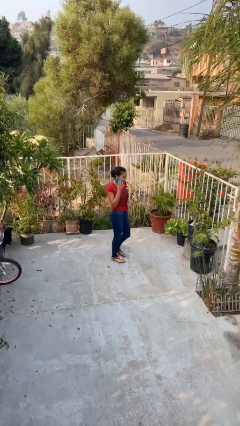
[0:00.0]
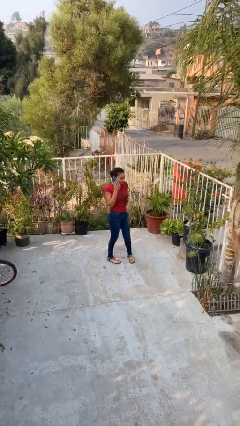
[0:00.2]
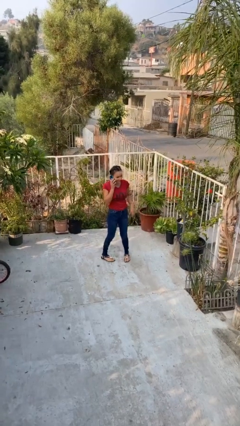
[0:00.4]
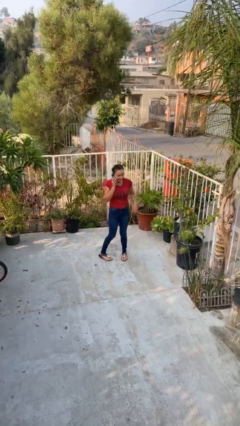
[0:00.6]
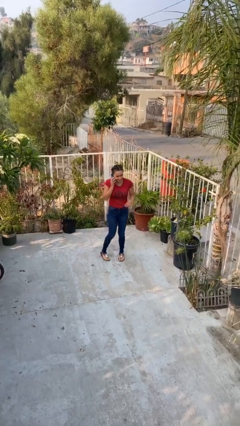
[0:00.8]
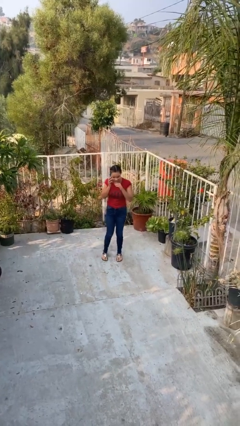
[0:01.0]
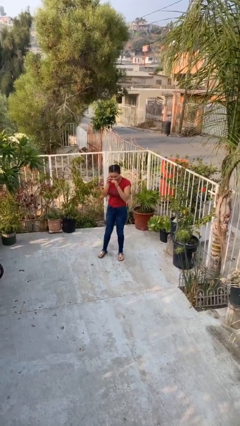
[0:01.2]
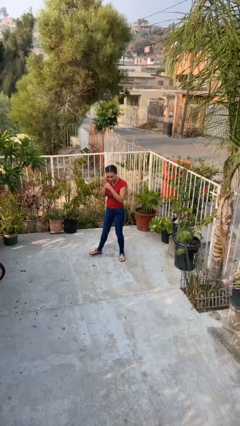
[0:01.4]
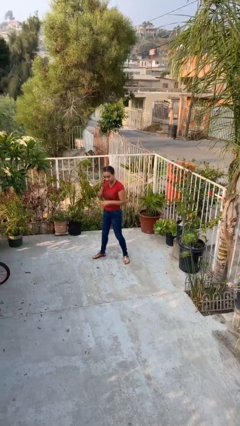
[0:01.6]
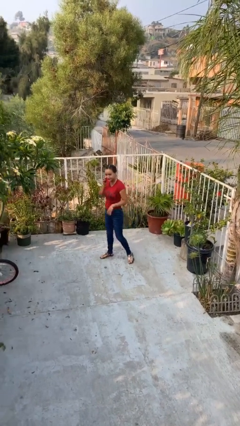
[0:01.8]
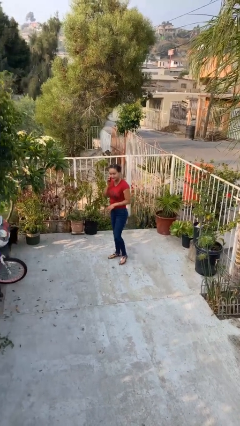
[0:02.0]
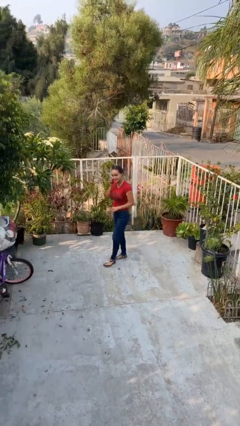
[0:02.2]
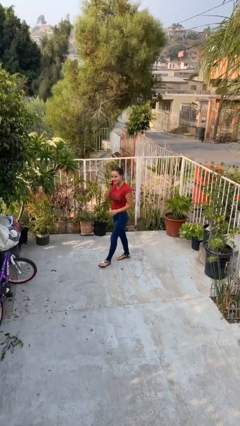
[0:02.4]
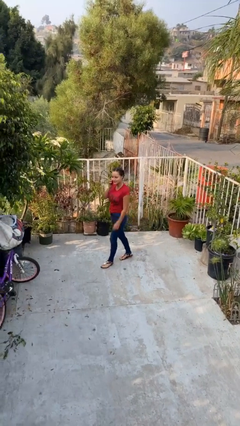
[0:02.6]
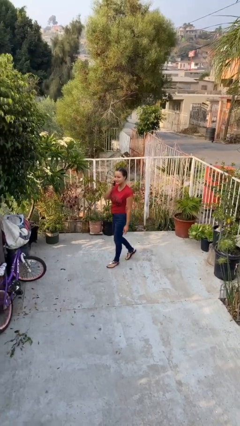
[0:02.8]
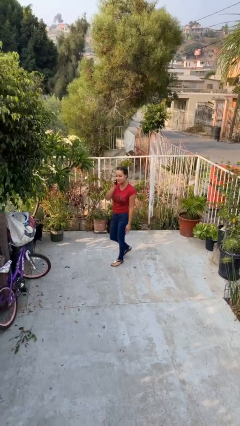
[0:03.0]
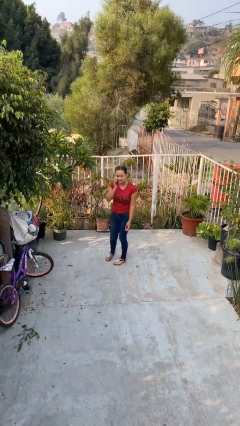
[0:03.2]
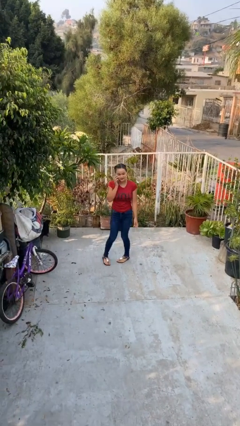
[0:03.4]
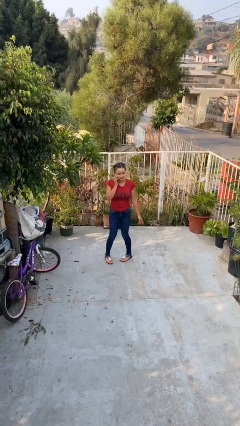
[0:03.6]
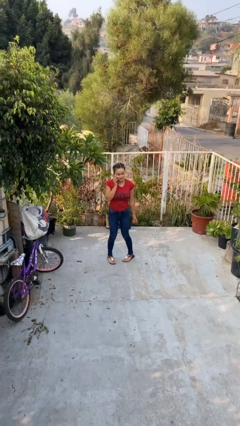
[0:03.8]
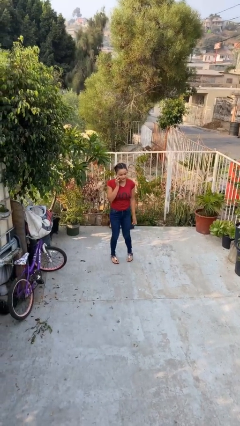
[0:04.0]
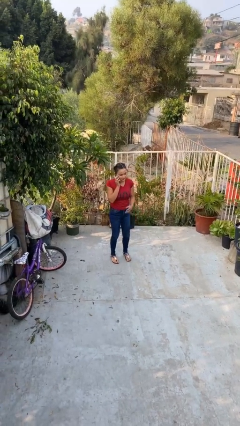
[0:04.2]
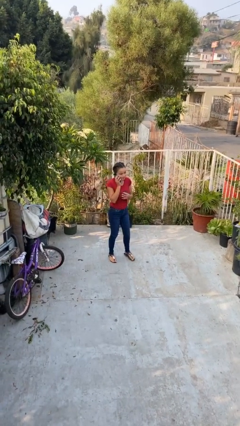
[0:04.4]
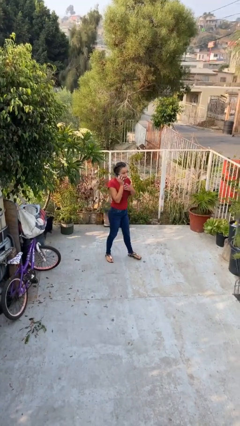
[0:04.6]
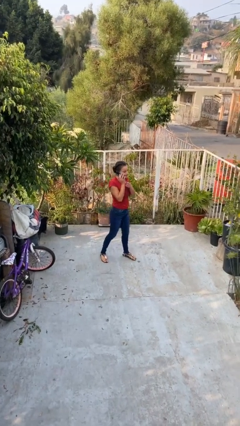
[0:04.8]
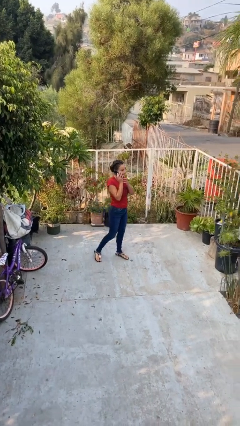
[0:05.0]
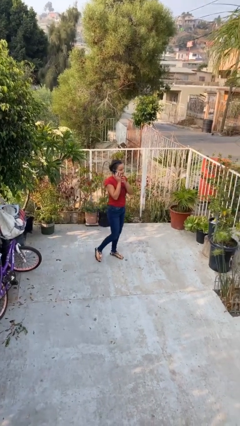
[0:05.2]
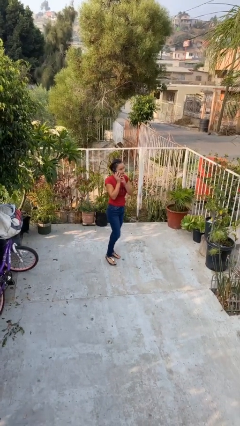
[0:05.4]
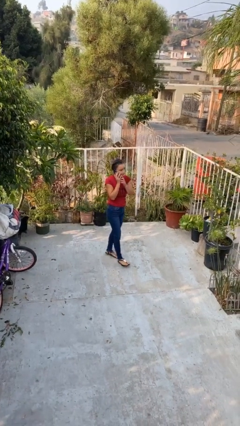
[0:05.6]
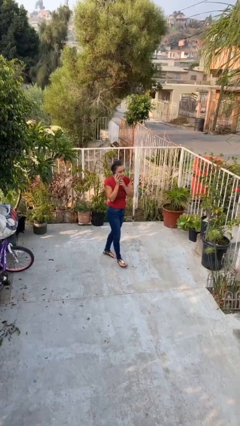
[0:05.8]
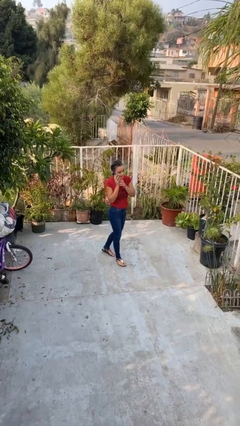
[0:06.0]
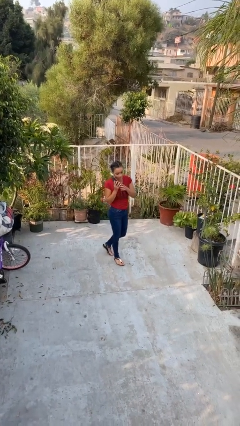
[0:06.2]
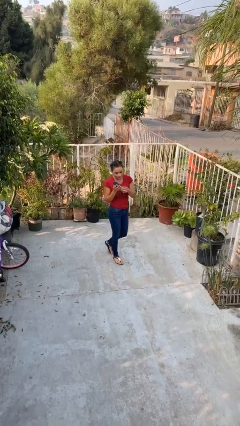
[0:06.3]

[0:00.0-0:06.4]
person talks on phone

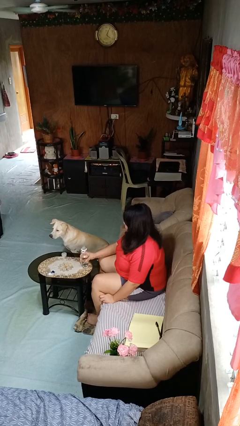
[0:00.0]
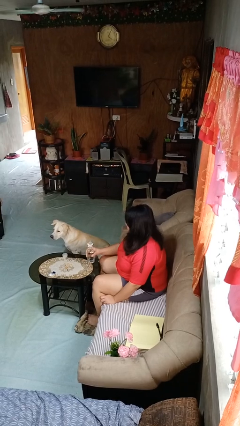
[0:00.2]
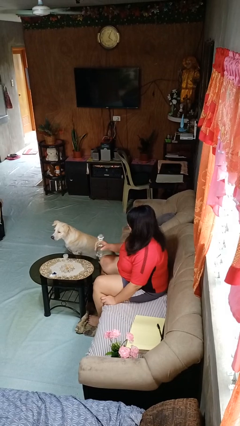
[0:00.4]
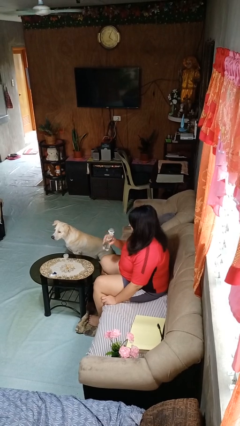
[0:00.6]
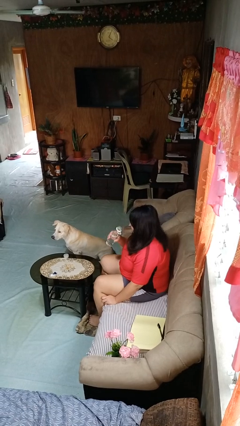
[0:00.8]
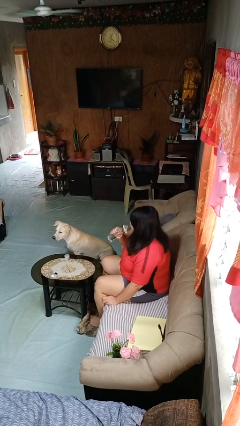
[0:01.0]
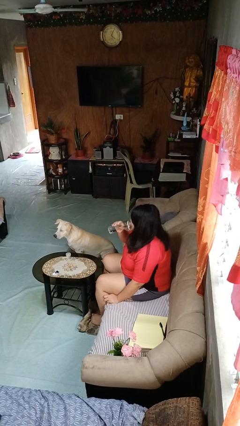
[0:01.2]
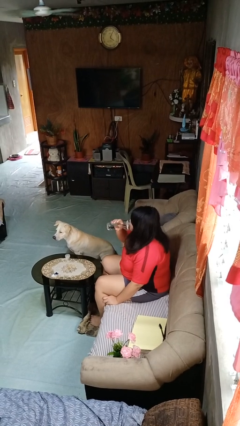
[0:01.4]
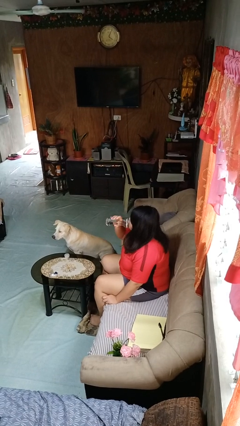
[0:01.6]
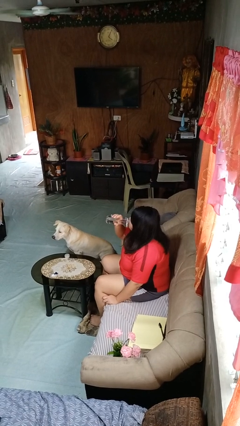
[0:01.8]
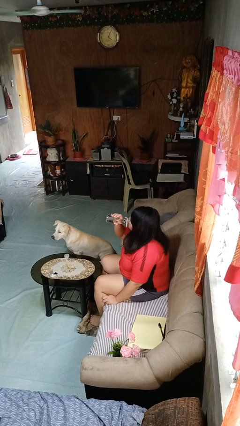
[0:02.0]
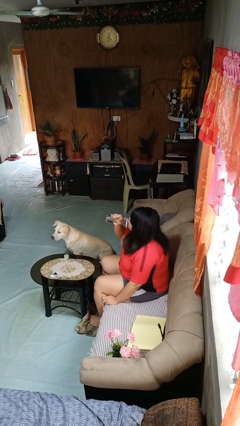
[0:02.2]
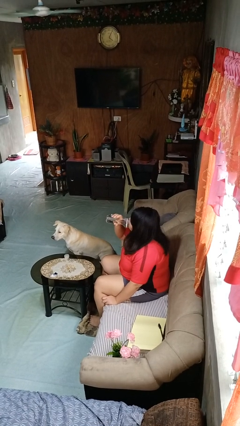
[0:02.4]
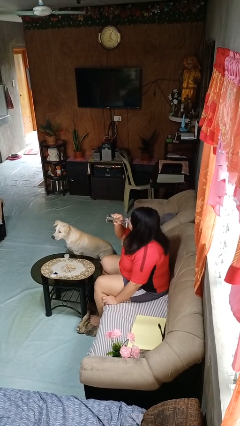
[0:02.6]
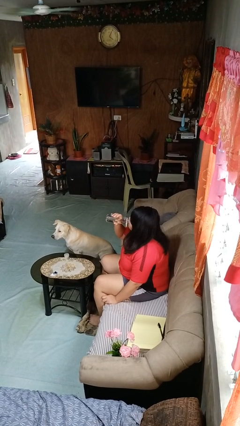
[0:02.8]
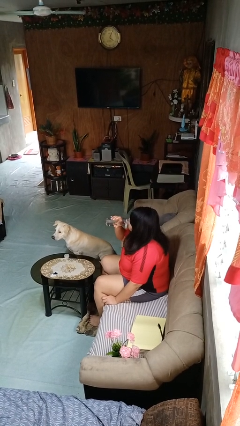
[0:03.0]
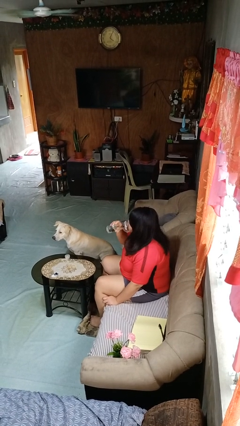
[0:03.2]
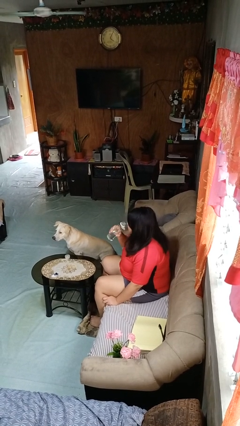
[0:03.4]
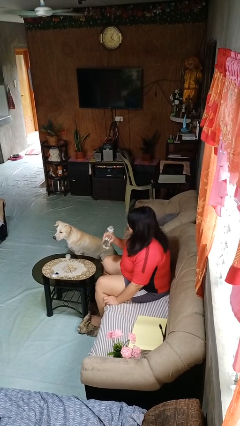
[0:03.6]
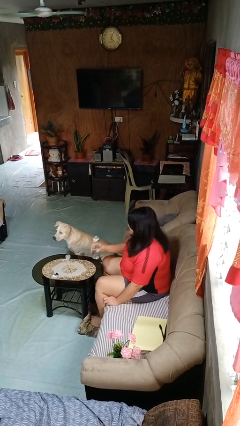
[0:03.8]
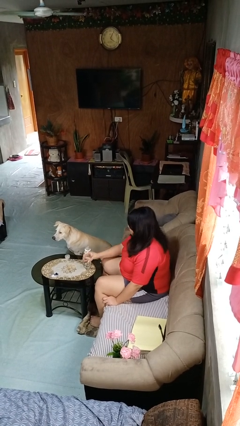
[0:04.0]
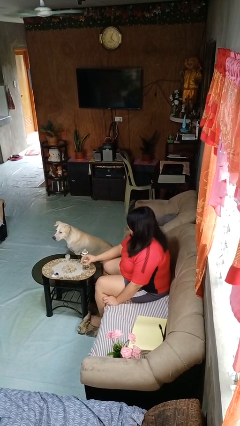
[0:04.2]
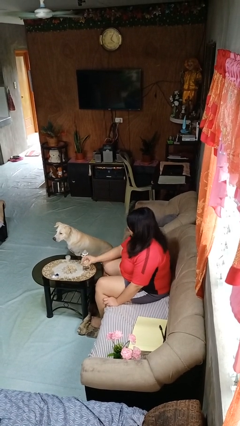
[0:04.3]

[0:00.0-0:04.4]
person drinks from bottle

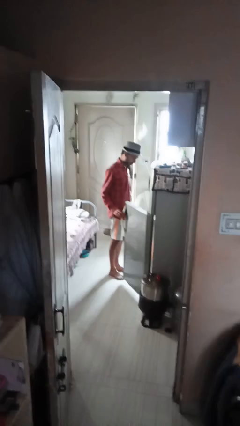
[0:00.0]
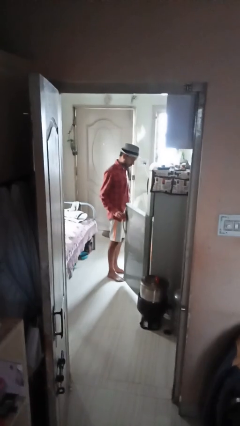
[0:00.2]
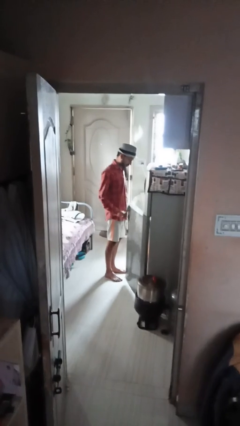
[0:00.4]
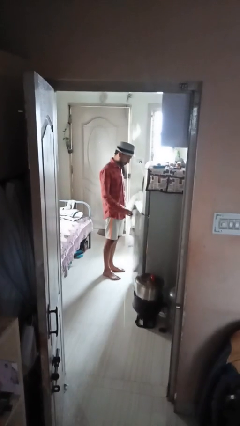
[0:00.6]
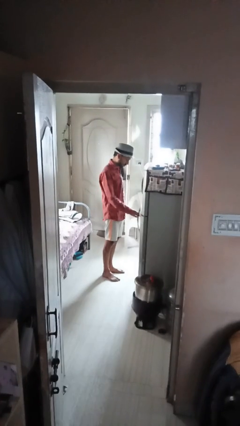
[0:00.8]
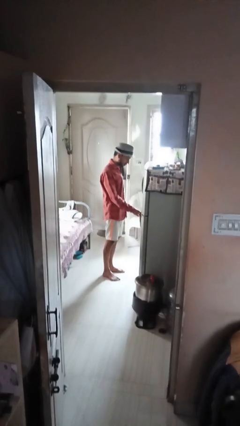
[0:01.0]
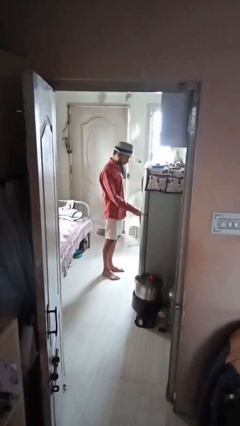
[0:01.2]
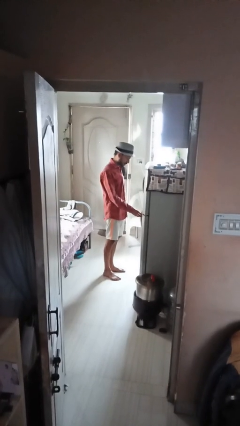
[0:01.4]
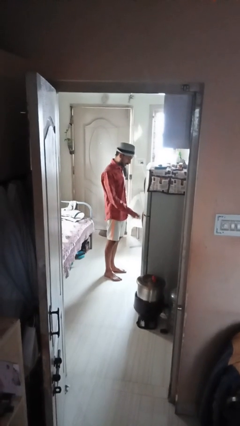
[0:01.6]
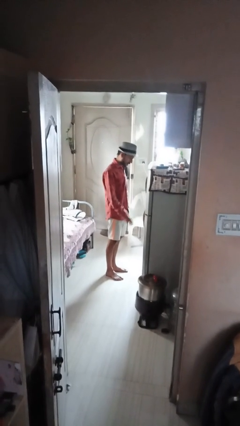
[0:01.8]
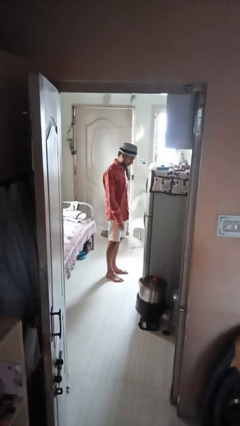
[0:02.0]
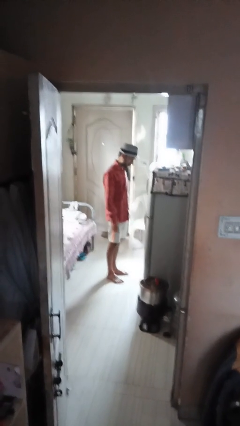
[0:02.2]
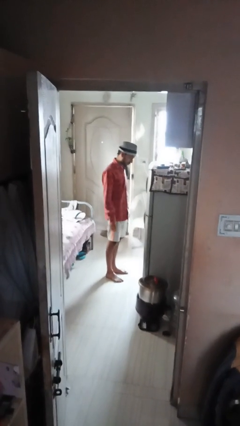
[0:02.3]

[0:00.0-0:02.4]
person closes refrigerator

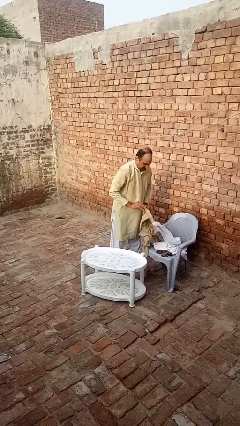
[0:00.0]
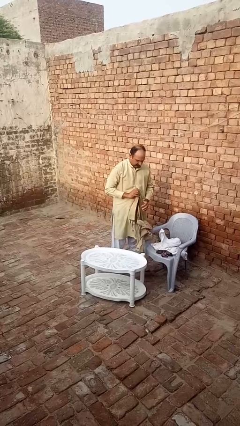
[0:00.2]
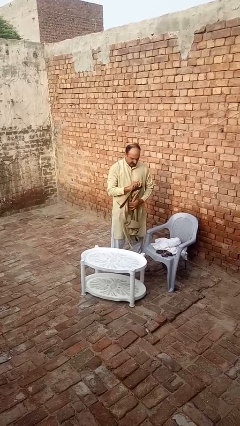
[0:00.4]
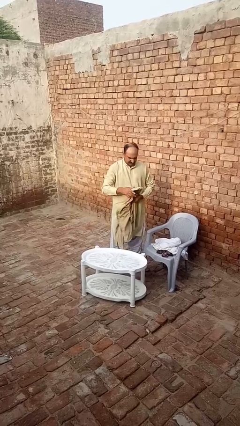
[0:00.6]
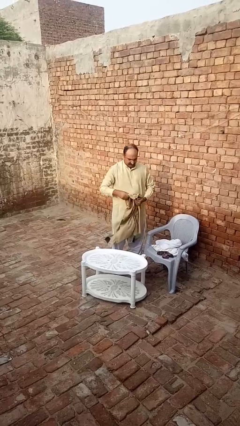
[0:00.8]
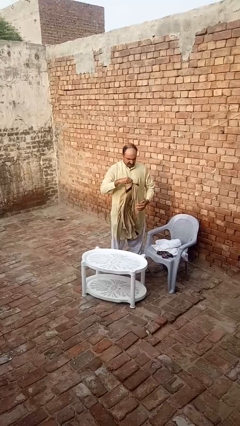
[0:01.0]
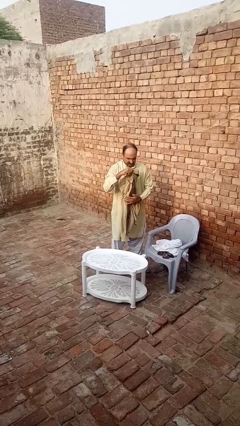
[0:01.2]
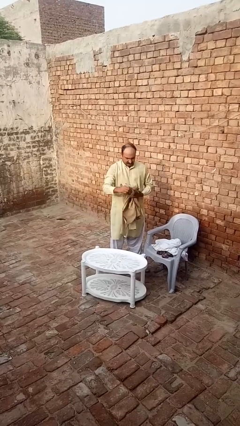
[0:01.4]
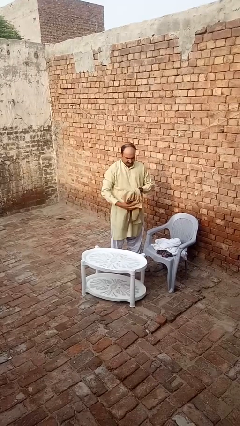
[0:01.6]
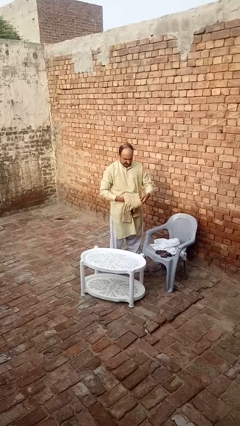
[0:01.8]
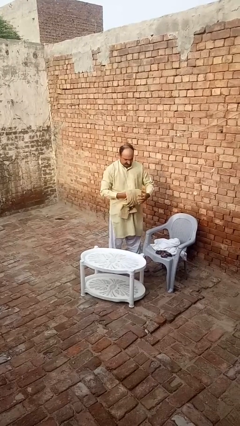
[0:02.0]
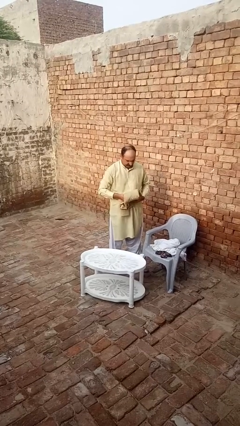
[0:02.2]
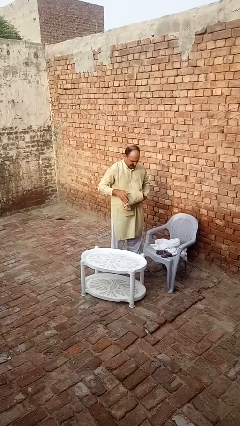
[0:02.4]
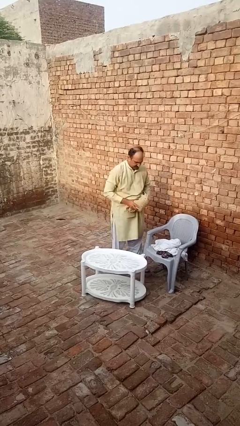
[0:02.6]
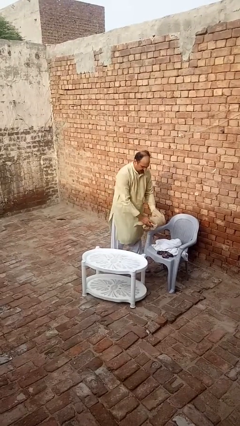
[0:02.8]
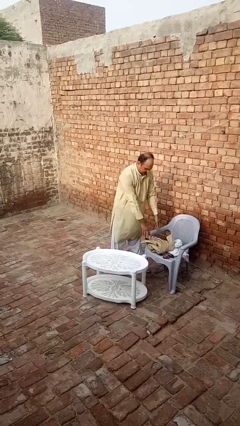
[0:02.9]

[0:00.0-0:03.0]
person folds shirt

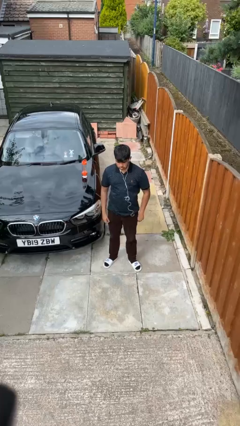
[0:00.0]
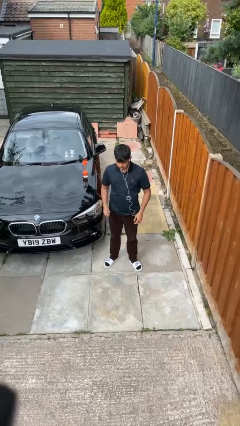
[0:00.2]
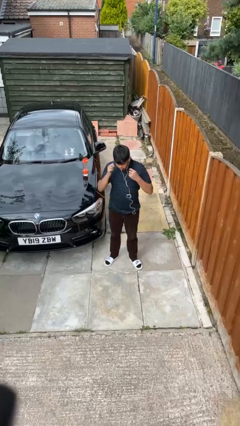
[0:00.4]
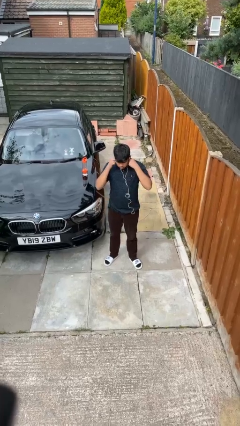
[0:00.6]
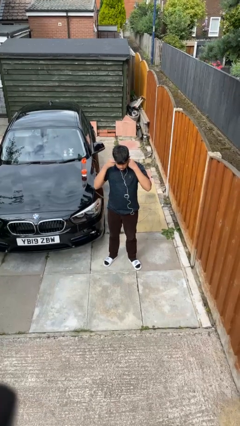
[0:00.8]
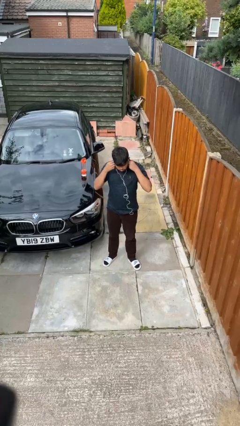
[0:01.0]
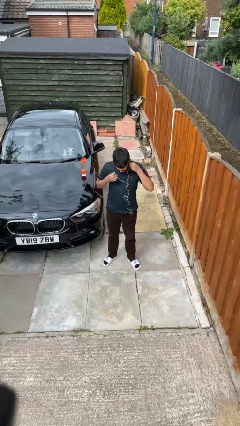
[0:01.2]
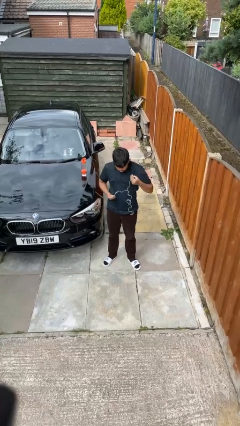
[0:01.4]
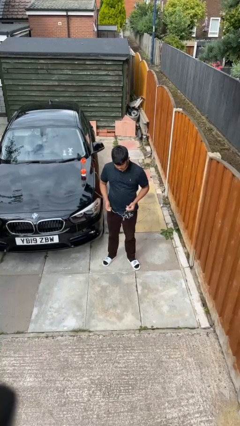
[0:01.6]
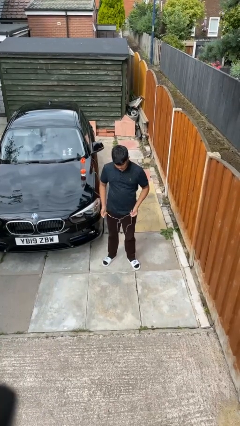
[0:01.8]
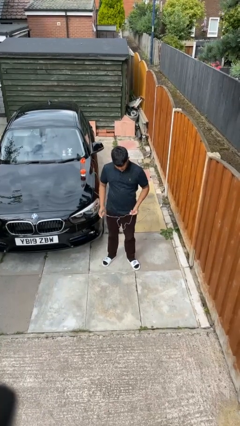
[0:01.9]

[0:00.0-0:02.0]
person takes off headphones
